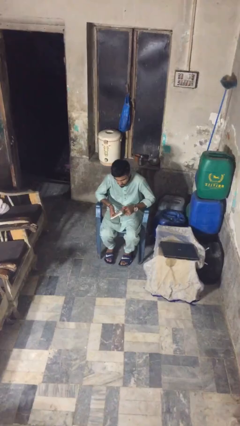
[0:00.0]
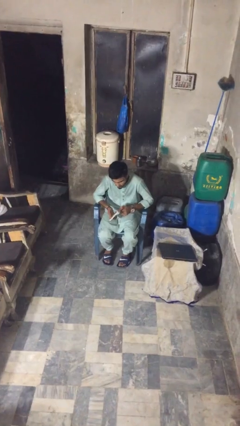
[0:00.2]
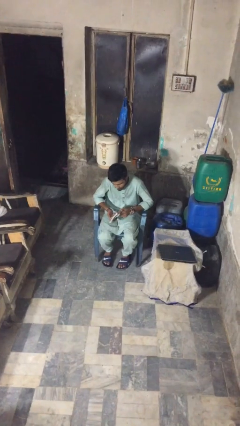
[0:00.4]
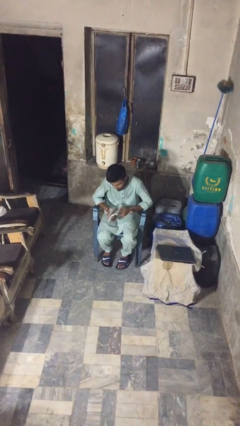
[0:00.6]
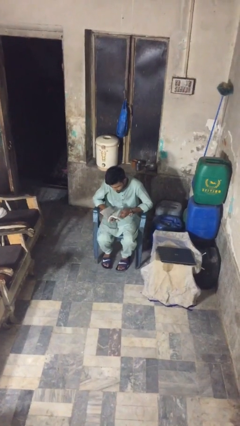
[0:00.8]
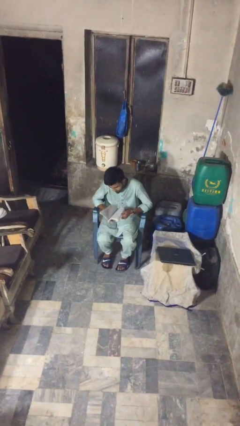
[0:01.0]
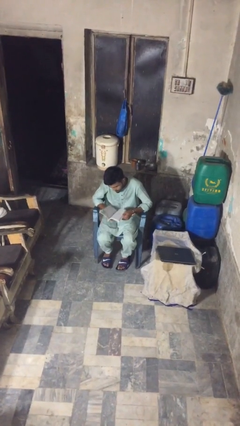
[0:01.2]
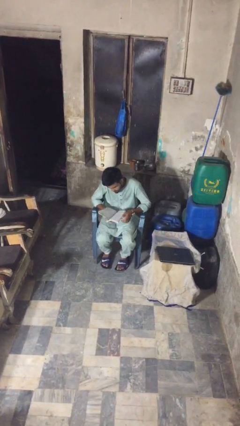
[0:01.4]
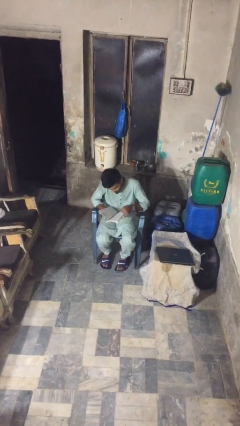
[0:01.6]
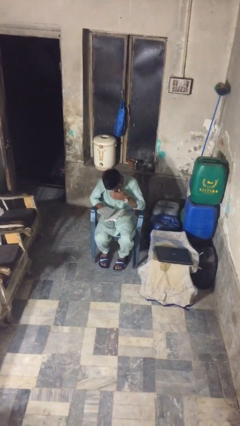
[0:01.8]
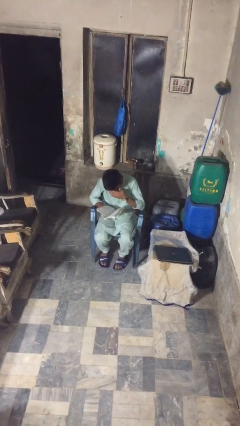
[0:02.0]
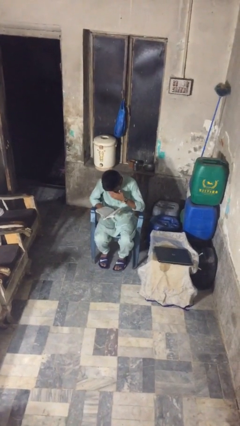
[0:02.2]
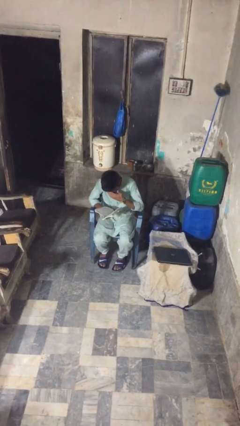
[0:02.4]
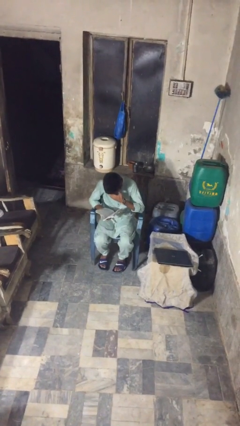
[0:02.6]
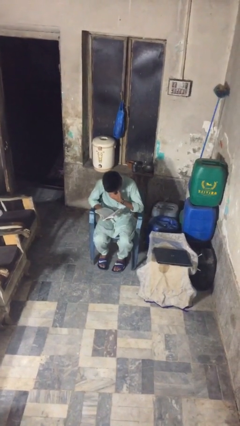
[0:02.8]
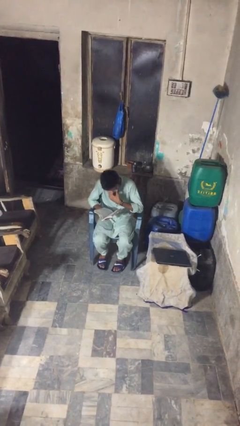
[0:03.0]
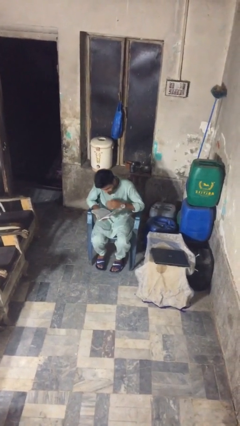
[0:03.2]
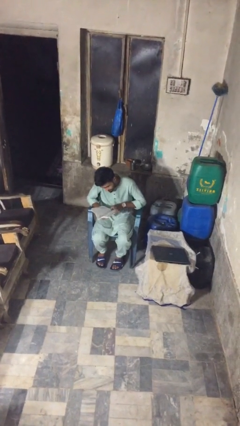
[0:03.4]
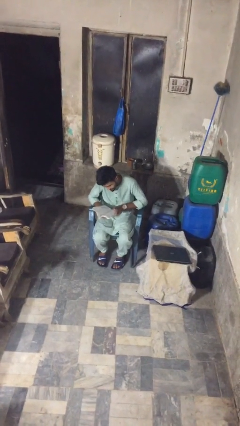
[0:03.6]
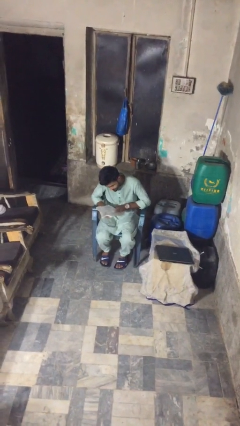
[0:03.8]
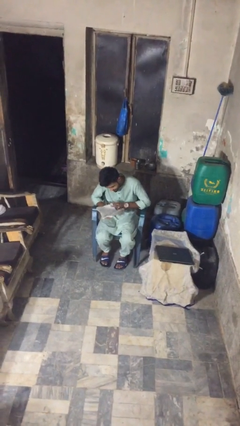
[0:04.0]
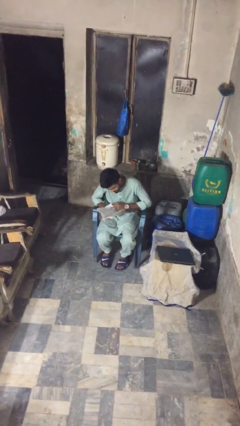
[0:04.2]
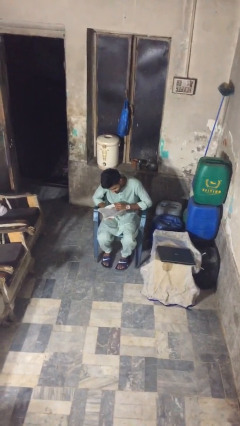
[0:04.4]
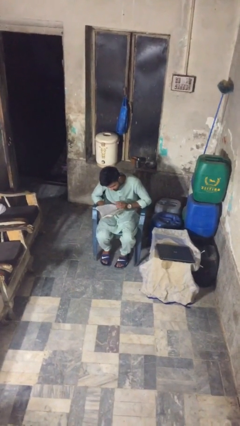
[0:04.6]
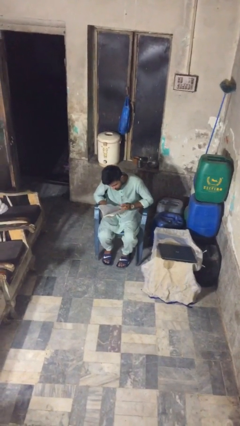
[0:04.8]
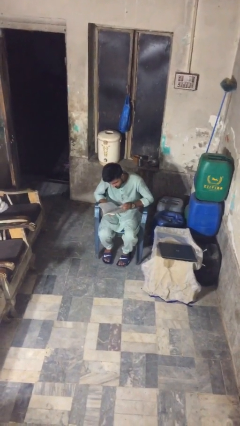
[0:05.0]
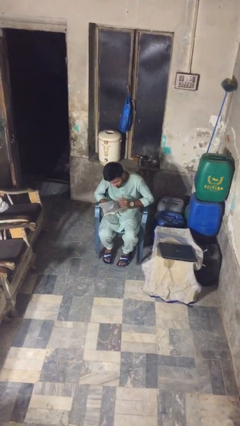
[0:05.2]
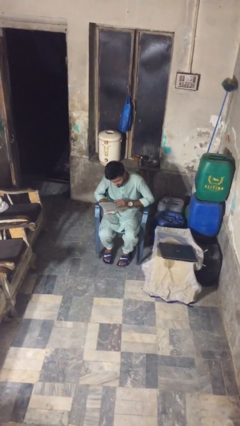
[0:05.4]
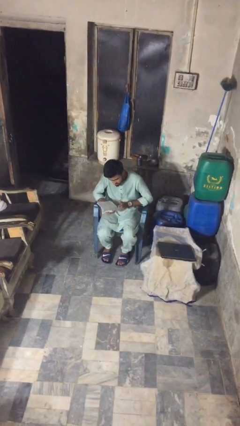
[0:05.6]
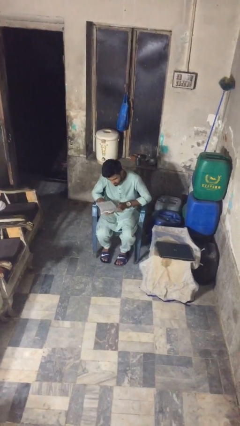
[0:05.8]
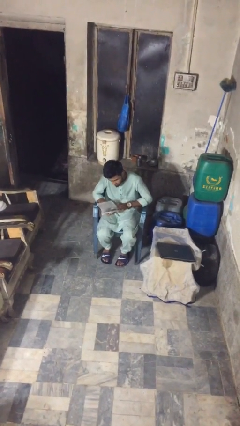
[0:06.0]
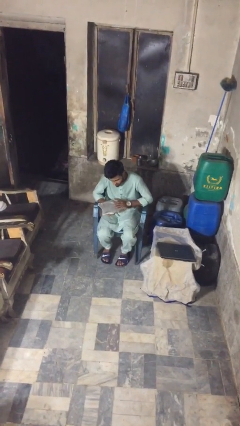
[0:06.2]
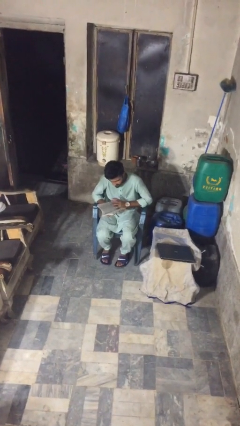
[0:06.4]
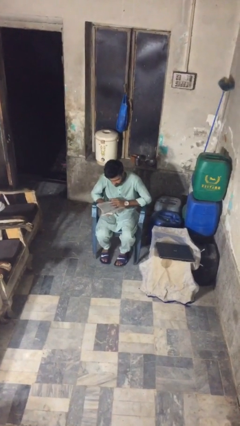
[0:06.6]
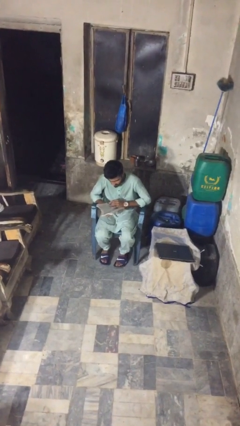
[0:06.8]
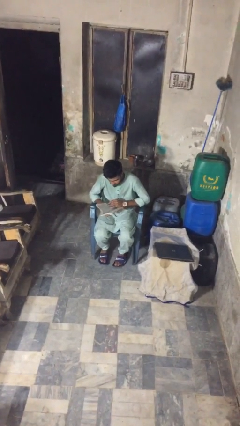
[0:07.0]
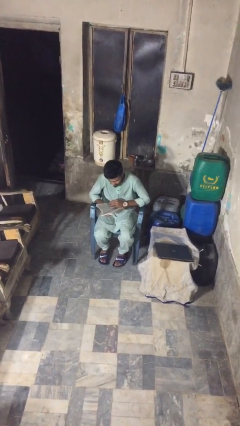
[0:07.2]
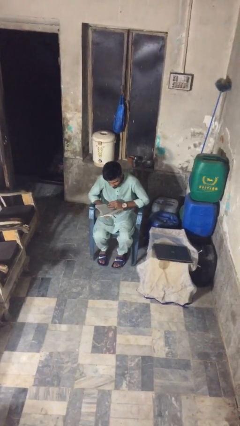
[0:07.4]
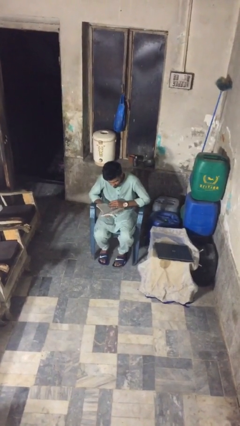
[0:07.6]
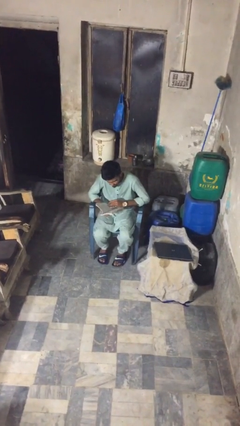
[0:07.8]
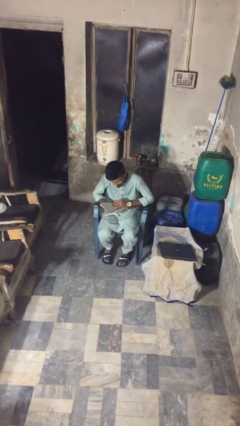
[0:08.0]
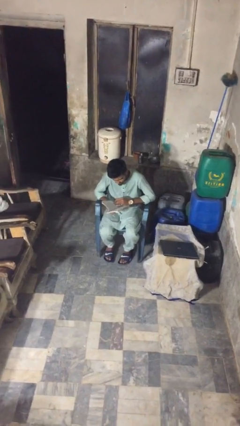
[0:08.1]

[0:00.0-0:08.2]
person reads document

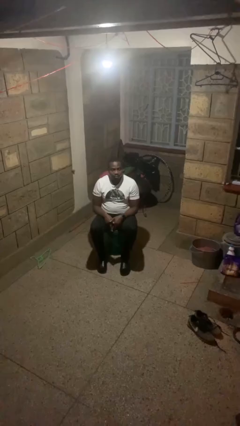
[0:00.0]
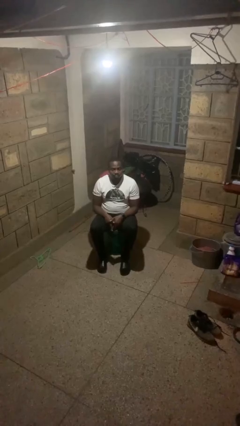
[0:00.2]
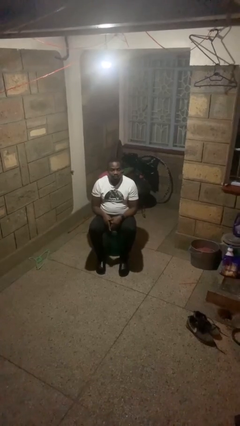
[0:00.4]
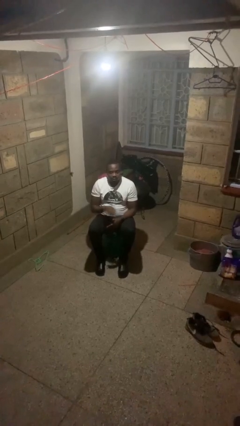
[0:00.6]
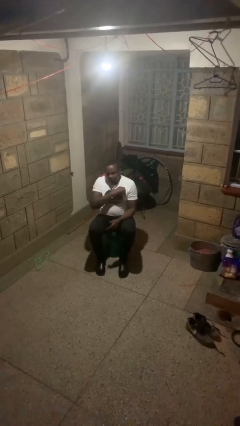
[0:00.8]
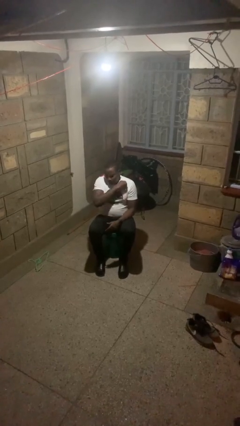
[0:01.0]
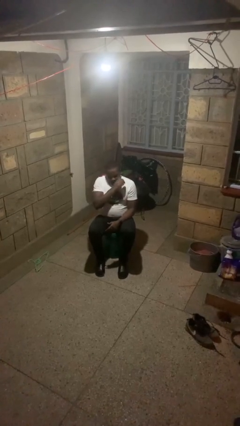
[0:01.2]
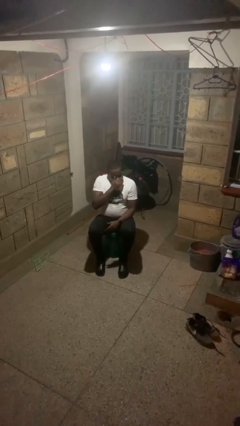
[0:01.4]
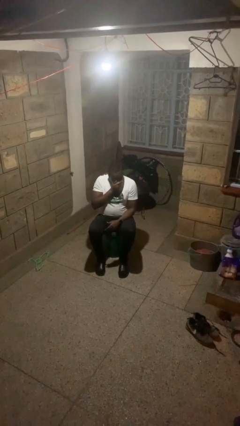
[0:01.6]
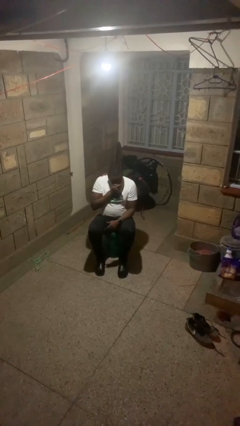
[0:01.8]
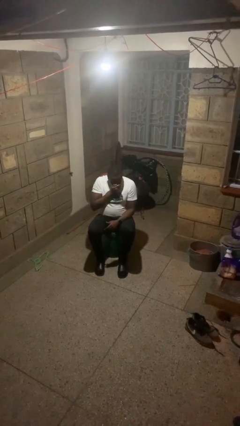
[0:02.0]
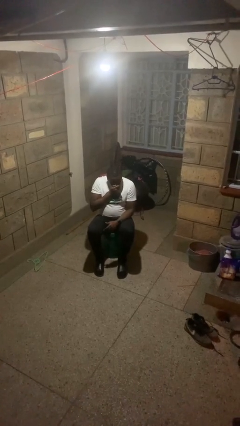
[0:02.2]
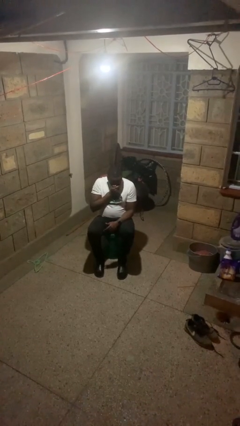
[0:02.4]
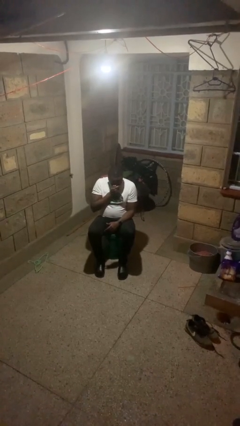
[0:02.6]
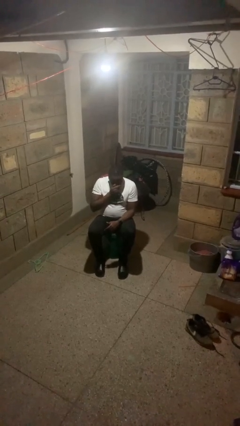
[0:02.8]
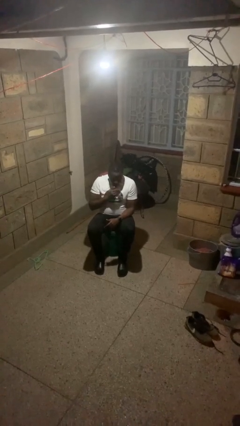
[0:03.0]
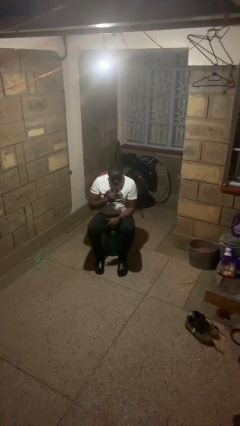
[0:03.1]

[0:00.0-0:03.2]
person sneezes into hand

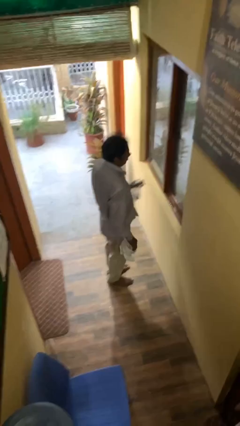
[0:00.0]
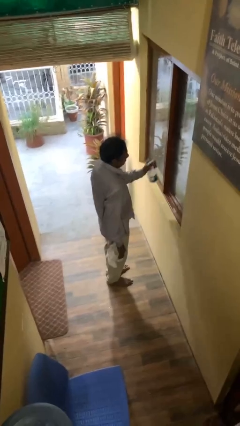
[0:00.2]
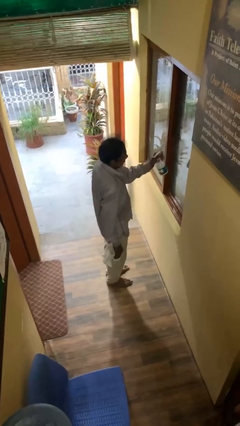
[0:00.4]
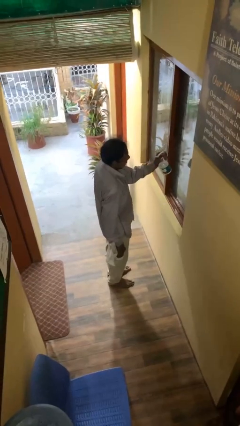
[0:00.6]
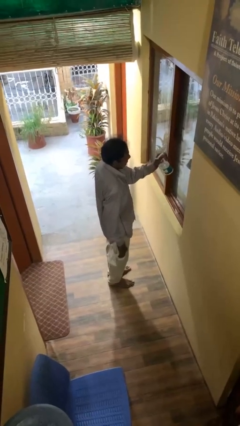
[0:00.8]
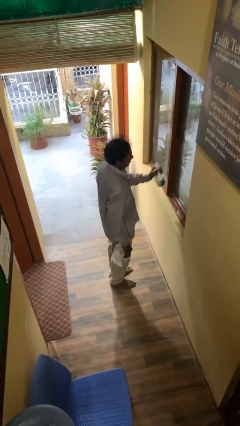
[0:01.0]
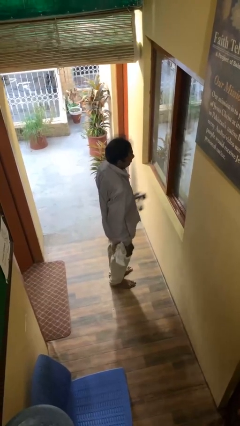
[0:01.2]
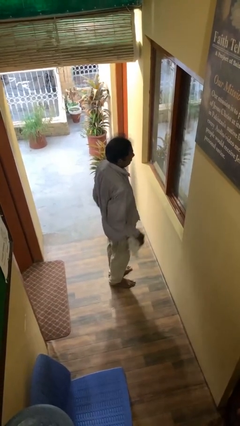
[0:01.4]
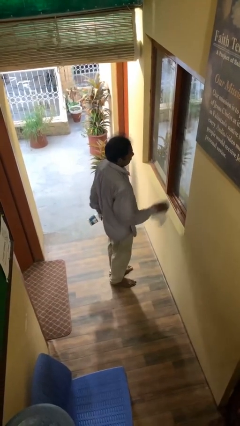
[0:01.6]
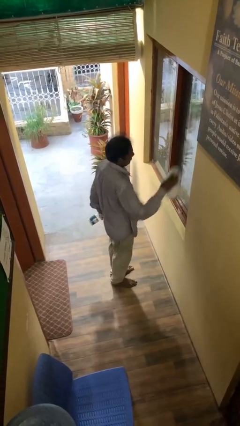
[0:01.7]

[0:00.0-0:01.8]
person sprays from bottle

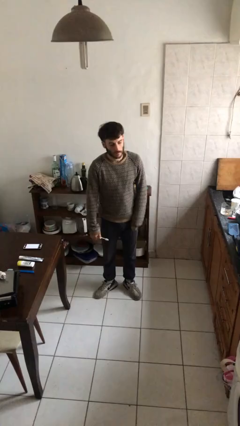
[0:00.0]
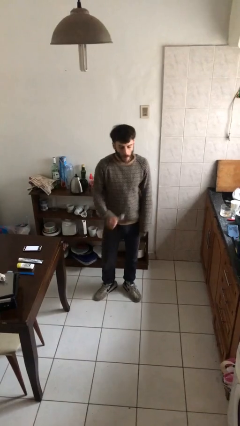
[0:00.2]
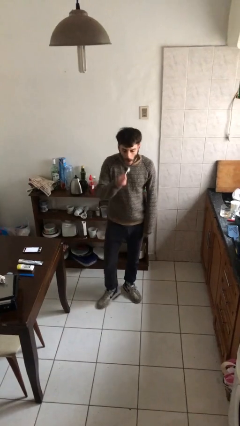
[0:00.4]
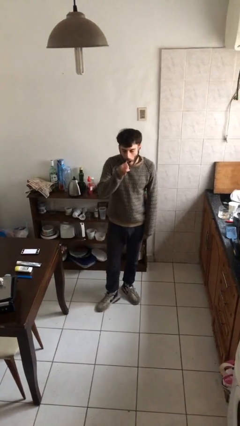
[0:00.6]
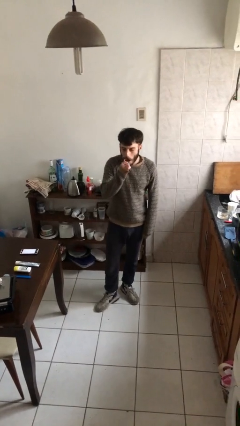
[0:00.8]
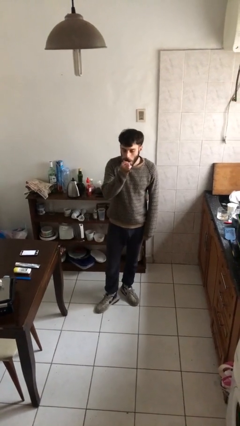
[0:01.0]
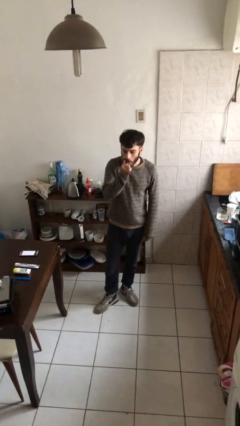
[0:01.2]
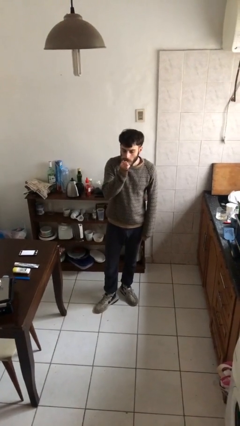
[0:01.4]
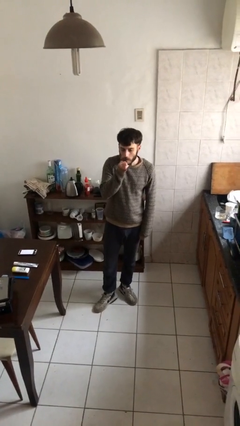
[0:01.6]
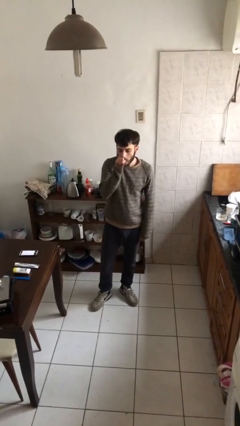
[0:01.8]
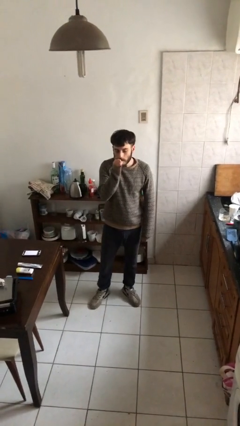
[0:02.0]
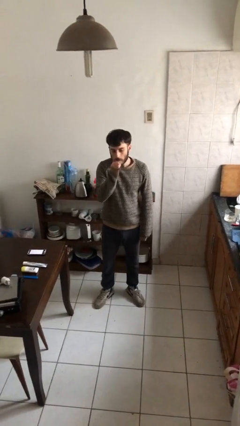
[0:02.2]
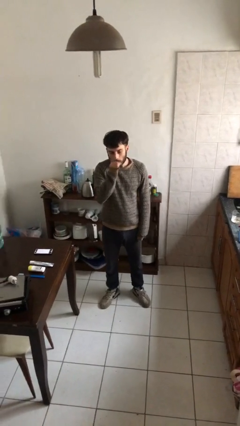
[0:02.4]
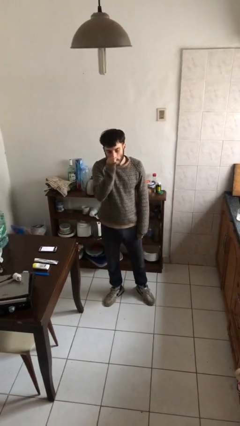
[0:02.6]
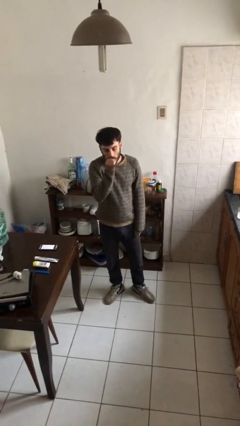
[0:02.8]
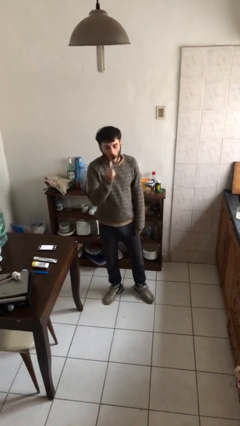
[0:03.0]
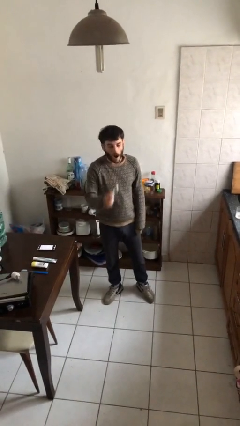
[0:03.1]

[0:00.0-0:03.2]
person brushes teeth

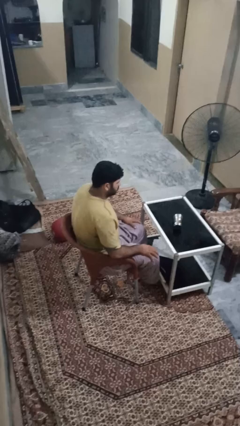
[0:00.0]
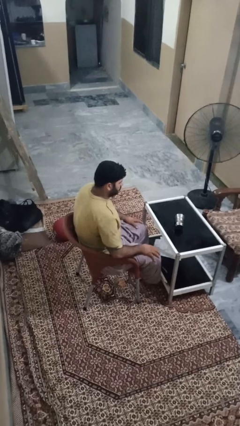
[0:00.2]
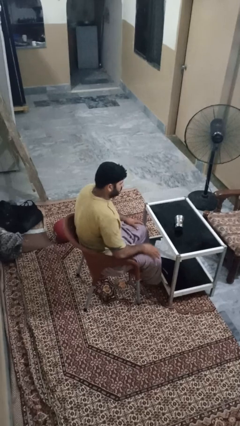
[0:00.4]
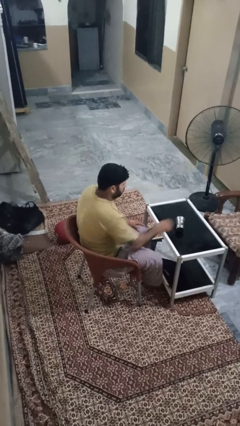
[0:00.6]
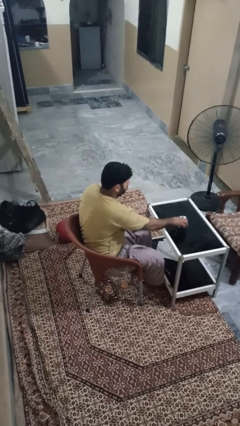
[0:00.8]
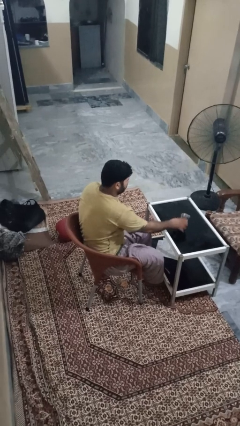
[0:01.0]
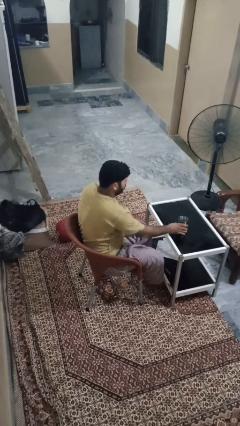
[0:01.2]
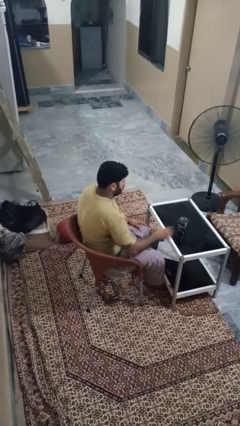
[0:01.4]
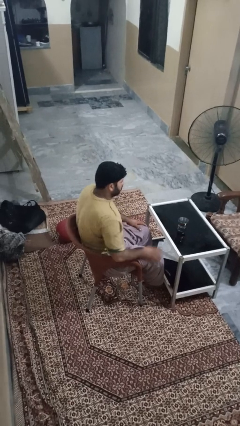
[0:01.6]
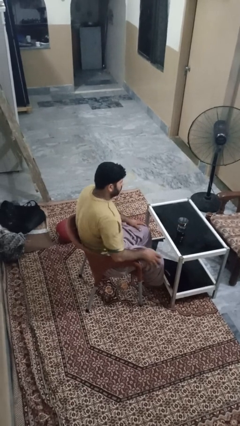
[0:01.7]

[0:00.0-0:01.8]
person sets upright glass
